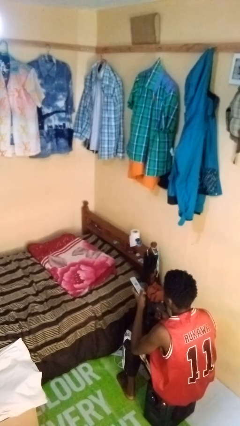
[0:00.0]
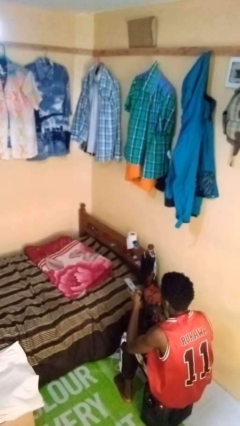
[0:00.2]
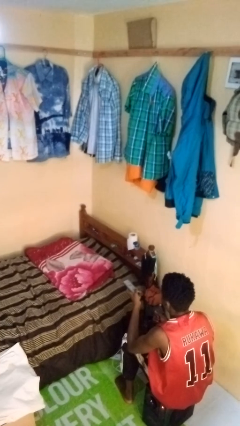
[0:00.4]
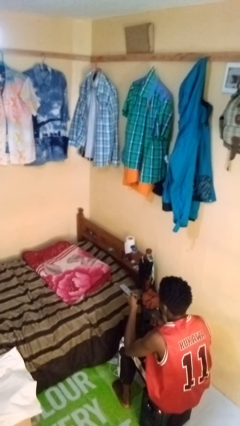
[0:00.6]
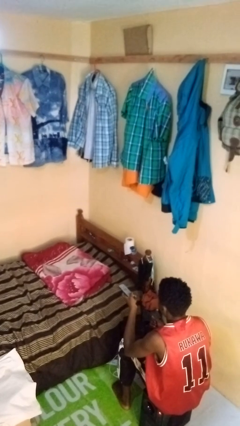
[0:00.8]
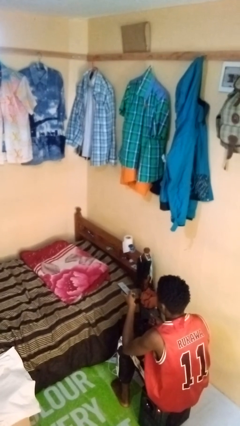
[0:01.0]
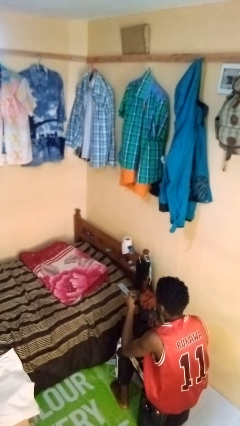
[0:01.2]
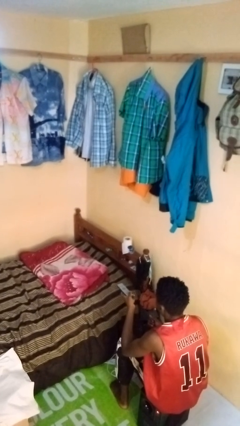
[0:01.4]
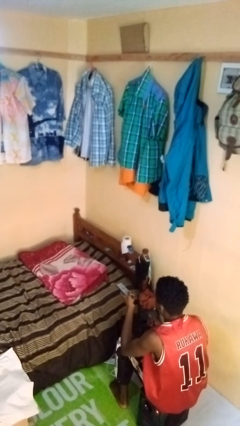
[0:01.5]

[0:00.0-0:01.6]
person uses television remote

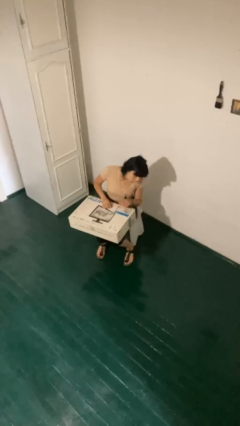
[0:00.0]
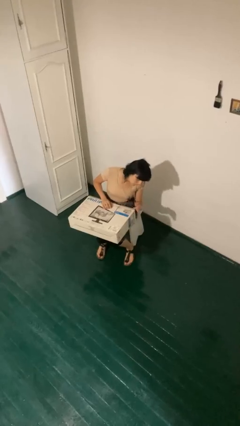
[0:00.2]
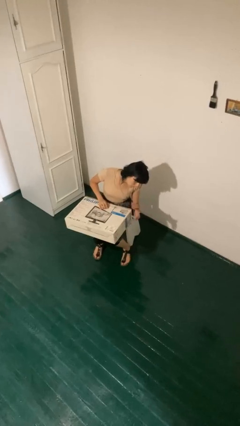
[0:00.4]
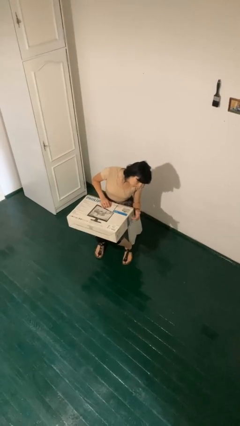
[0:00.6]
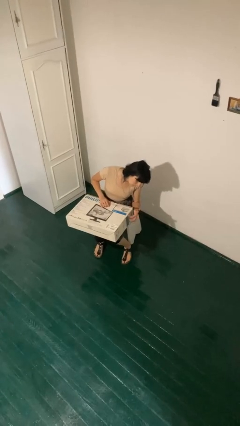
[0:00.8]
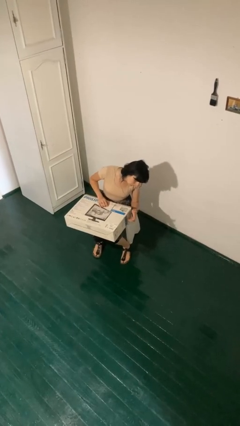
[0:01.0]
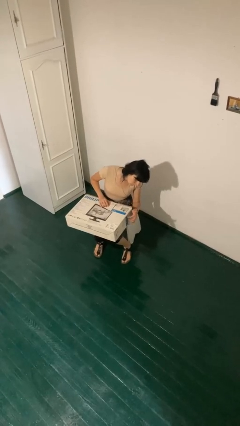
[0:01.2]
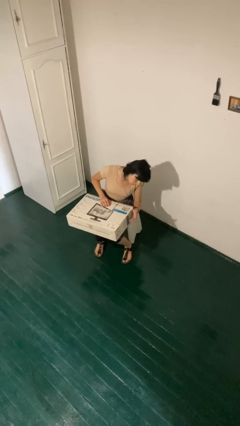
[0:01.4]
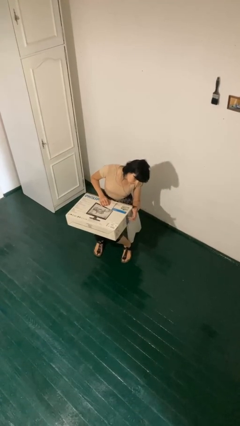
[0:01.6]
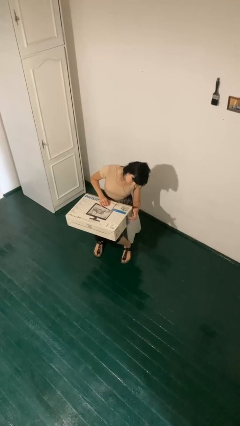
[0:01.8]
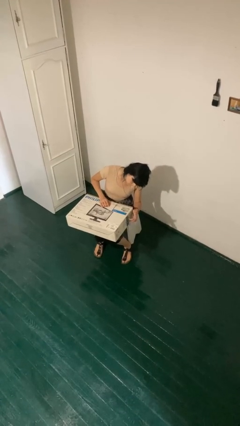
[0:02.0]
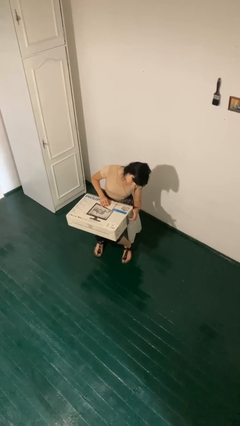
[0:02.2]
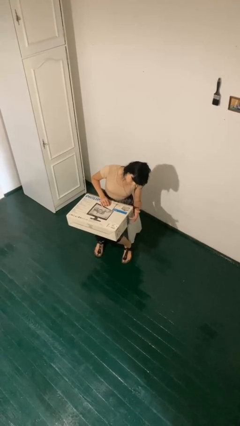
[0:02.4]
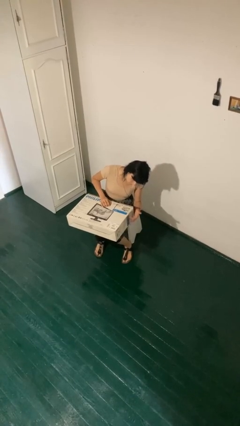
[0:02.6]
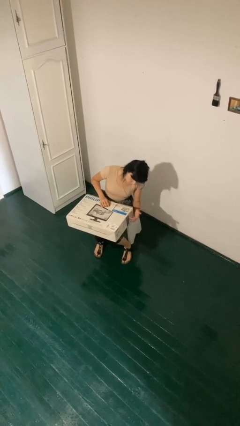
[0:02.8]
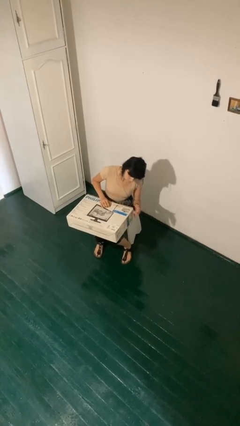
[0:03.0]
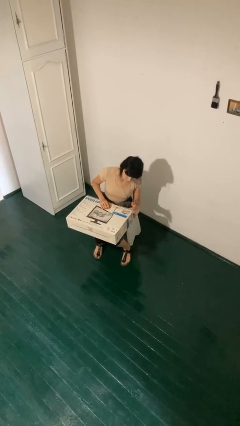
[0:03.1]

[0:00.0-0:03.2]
person taps object with finger

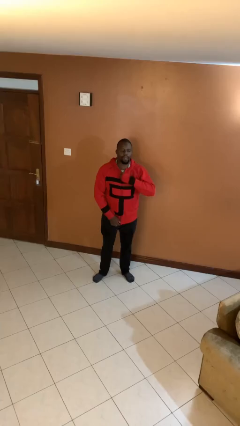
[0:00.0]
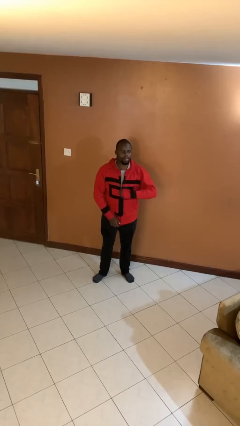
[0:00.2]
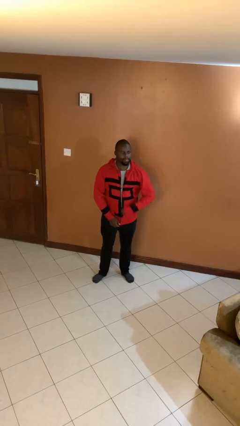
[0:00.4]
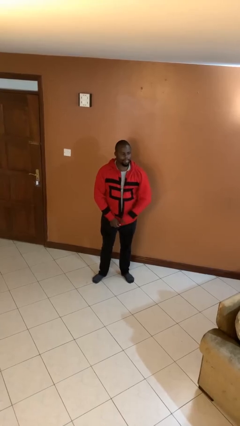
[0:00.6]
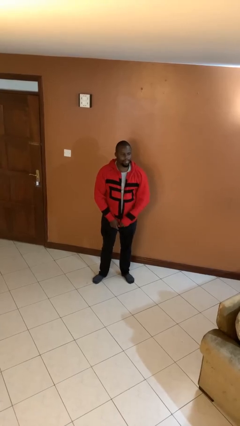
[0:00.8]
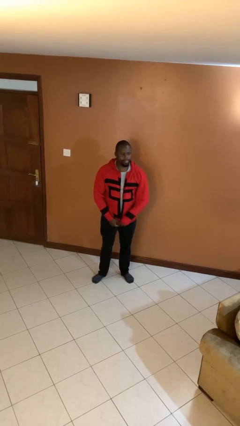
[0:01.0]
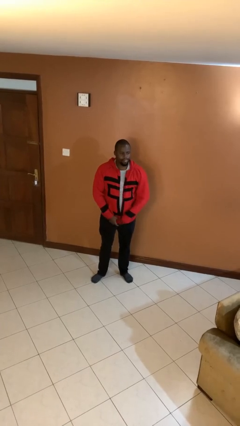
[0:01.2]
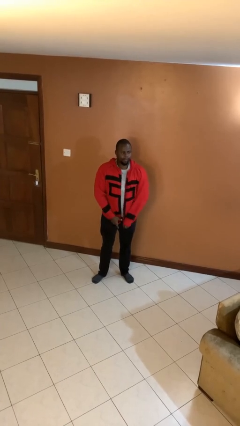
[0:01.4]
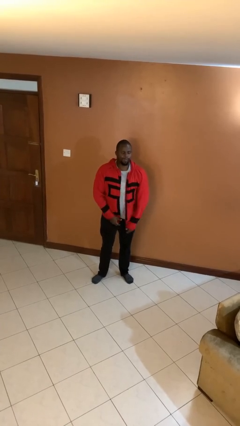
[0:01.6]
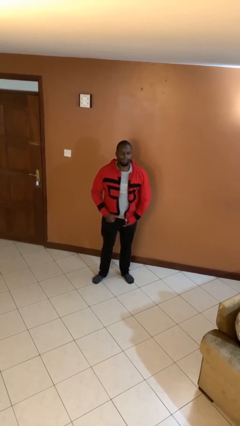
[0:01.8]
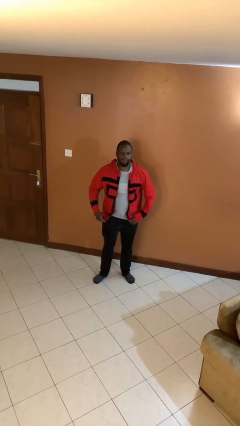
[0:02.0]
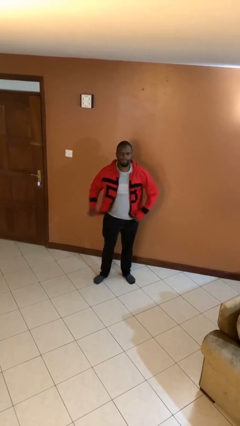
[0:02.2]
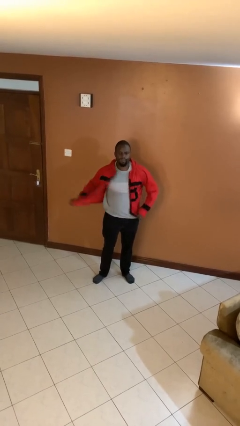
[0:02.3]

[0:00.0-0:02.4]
person unzips jacket

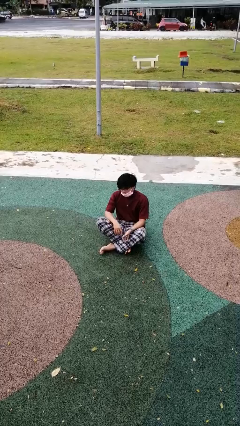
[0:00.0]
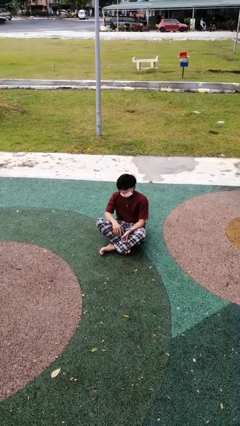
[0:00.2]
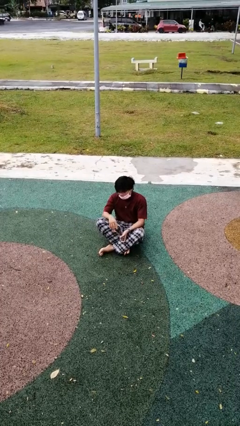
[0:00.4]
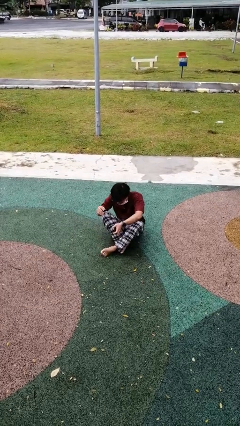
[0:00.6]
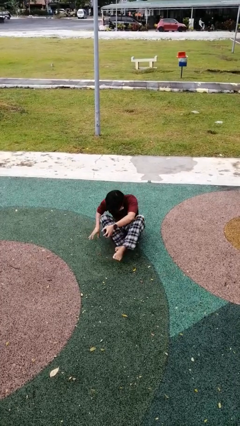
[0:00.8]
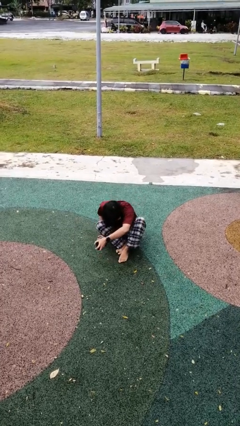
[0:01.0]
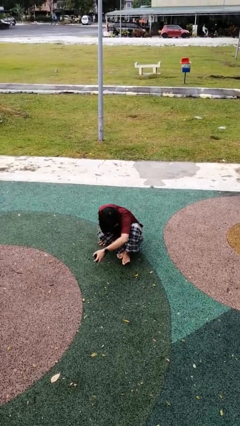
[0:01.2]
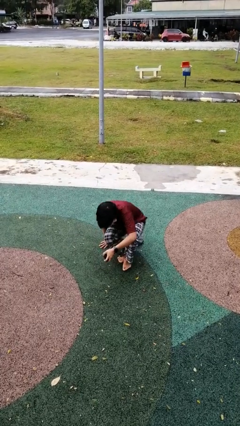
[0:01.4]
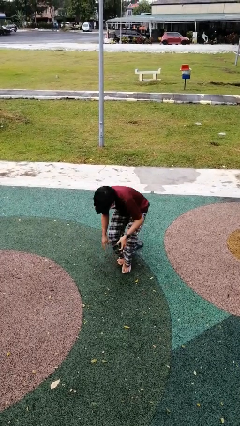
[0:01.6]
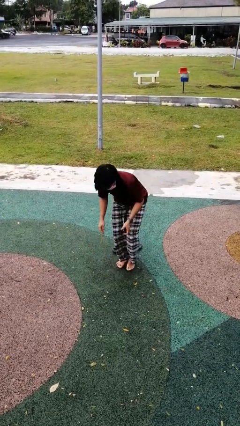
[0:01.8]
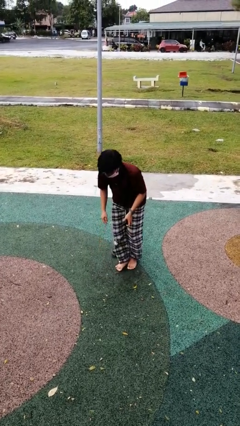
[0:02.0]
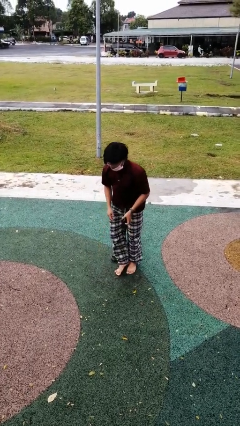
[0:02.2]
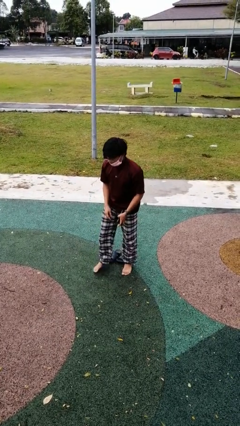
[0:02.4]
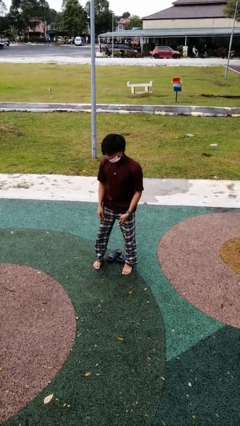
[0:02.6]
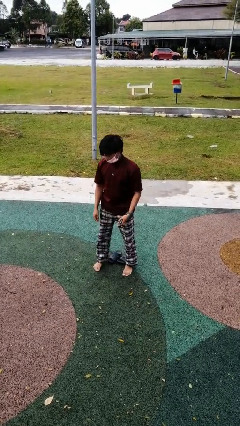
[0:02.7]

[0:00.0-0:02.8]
person stands up from floor

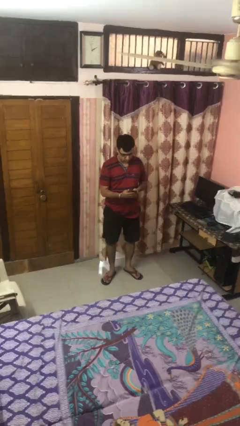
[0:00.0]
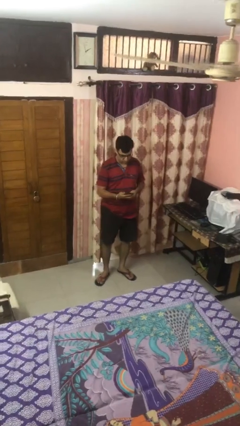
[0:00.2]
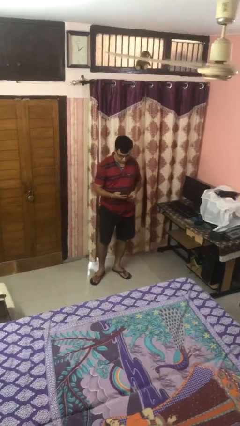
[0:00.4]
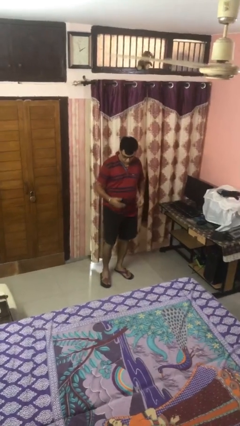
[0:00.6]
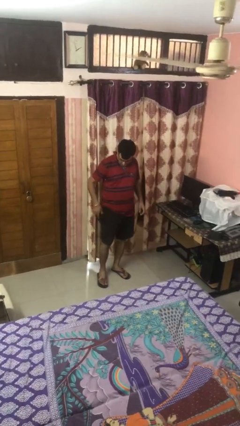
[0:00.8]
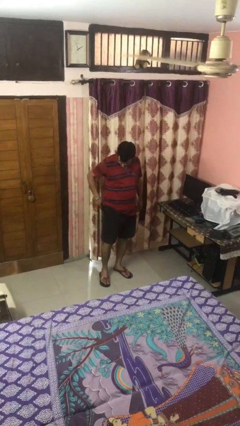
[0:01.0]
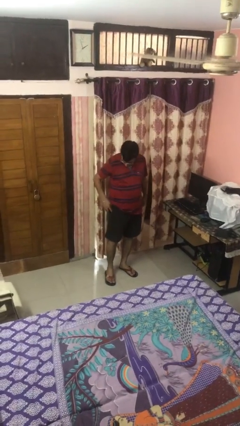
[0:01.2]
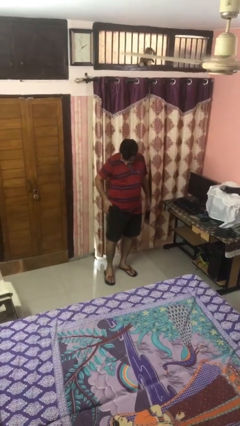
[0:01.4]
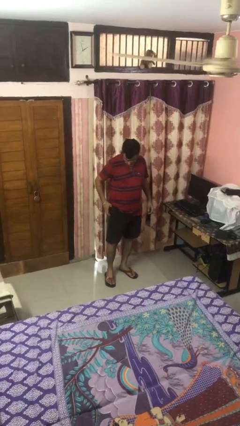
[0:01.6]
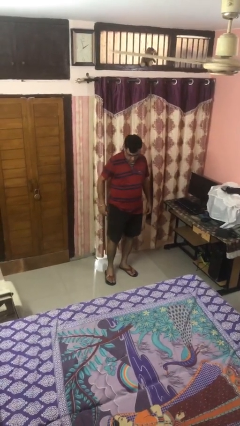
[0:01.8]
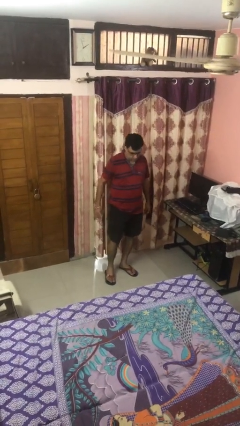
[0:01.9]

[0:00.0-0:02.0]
person puts phone into pocket

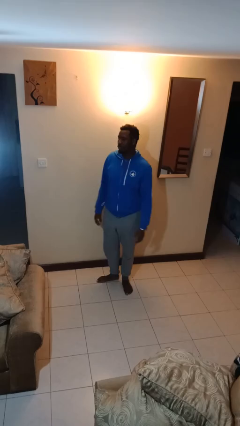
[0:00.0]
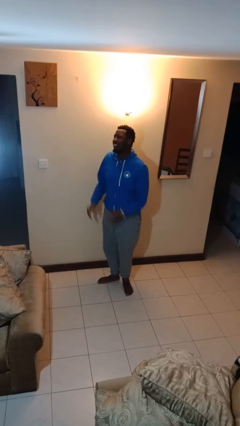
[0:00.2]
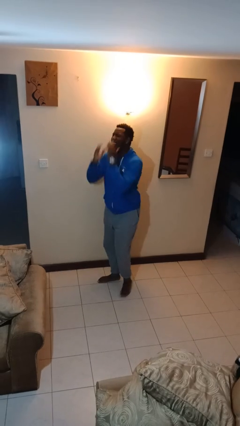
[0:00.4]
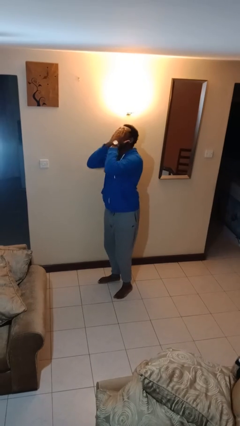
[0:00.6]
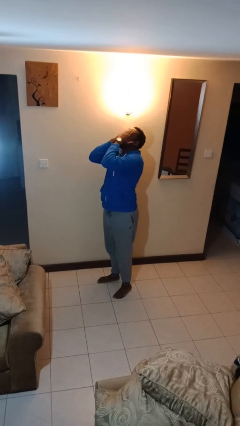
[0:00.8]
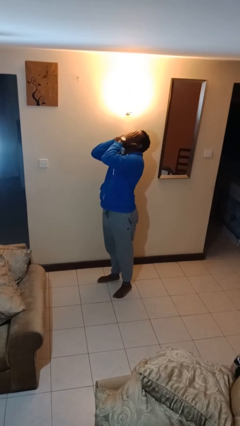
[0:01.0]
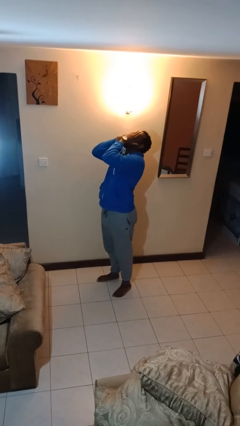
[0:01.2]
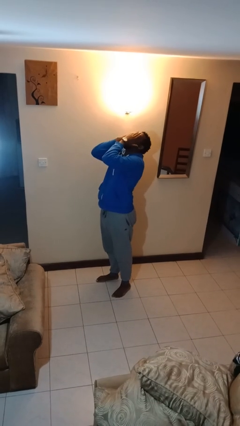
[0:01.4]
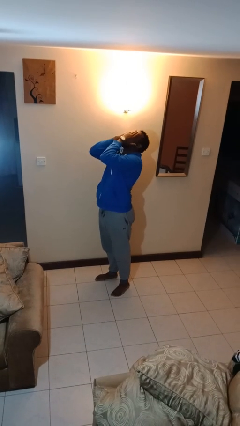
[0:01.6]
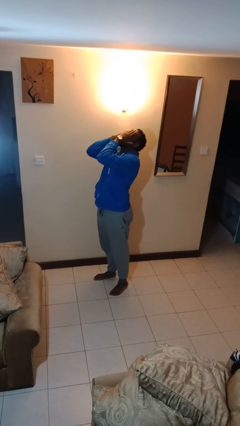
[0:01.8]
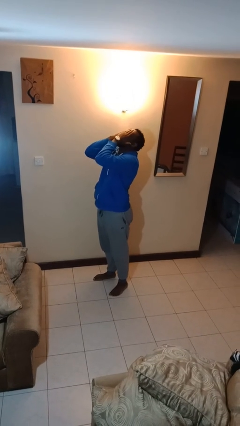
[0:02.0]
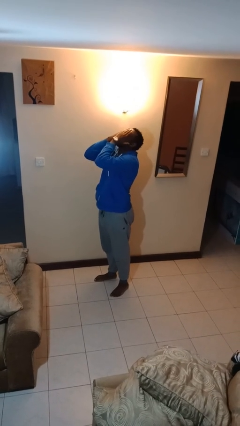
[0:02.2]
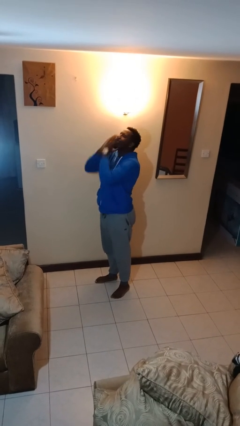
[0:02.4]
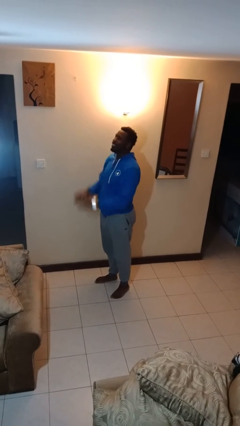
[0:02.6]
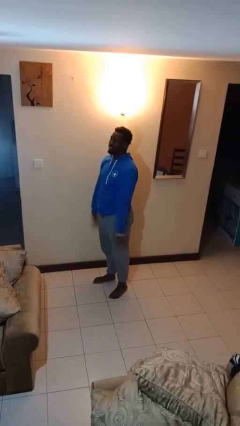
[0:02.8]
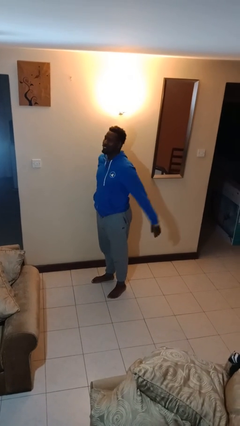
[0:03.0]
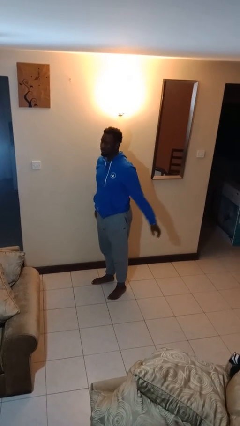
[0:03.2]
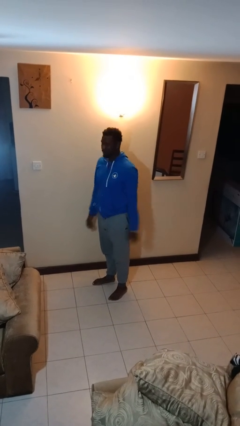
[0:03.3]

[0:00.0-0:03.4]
person covers face with hands

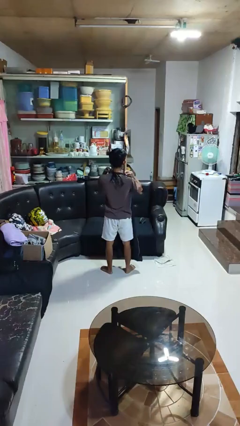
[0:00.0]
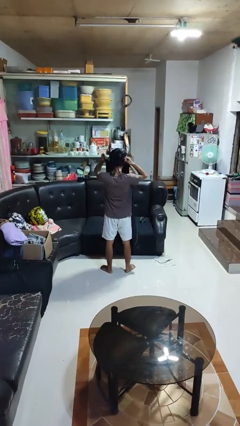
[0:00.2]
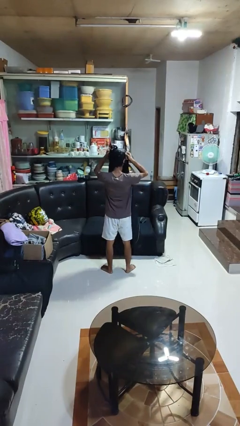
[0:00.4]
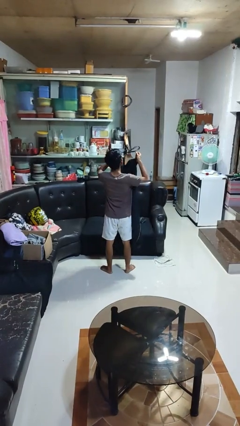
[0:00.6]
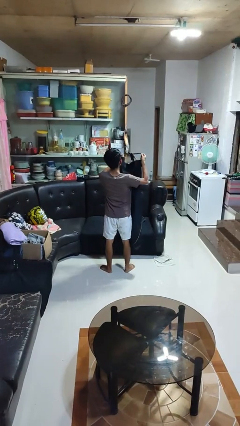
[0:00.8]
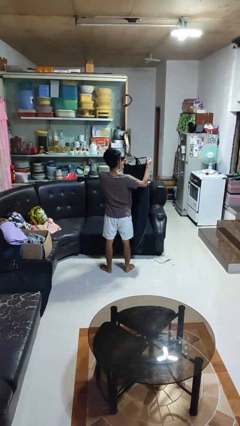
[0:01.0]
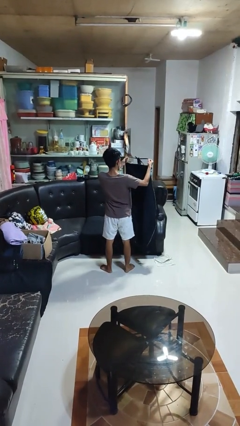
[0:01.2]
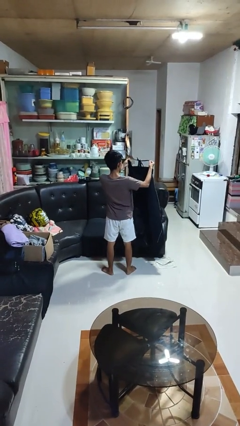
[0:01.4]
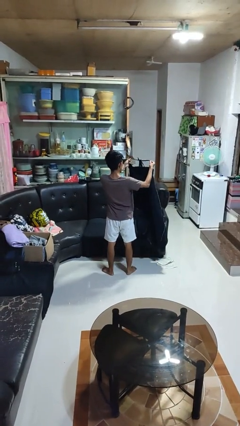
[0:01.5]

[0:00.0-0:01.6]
person takes off apron

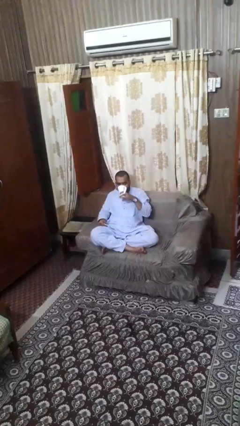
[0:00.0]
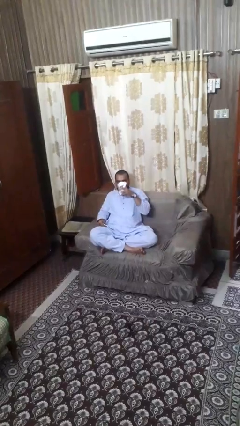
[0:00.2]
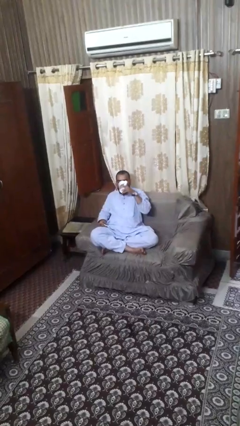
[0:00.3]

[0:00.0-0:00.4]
person stirs mug
